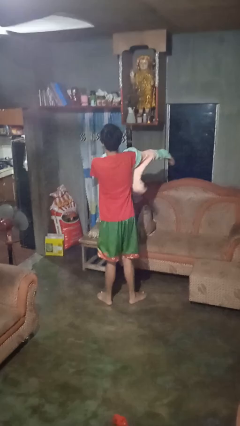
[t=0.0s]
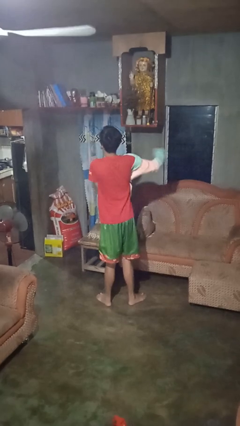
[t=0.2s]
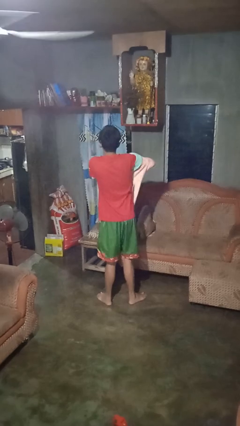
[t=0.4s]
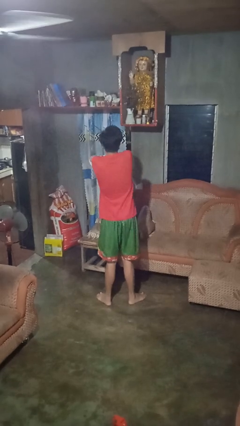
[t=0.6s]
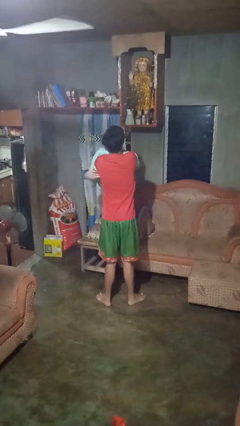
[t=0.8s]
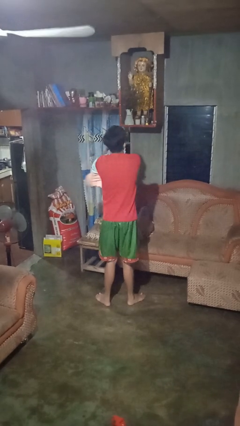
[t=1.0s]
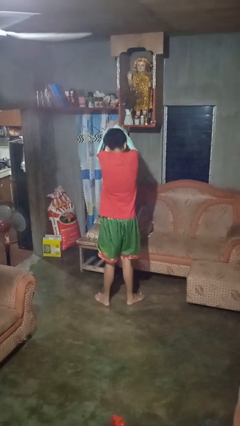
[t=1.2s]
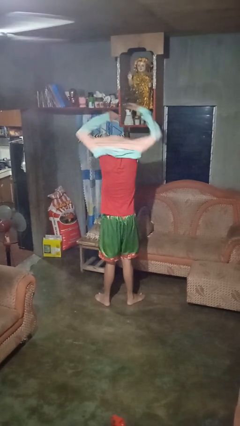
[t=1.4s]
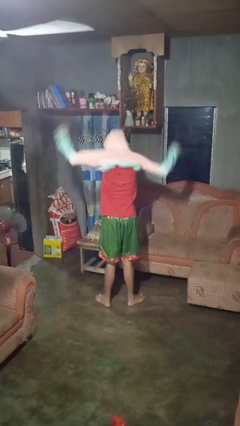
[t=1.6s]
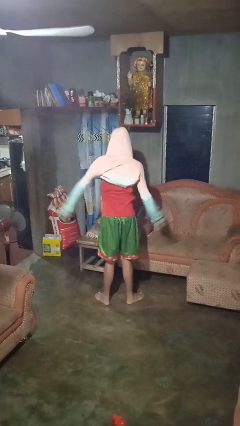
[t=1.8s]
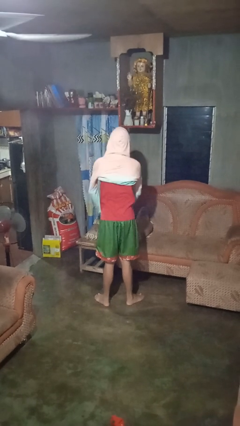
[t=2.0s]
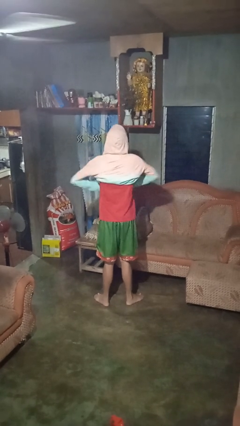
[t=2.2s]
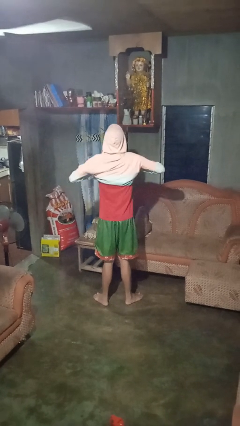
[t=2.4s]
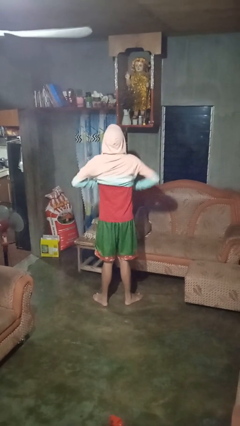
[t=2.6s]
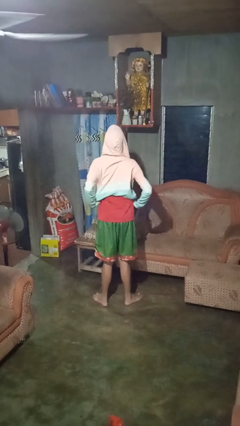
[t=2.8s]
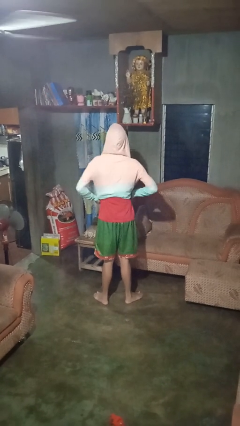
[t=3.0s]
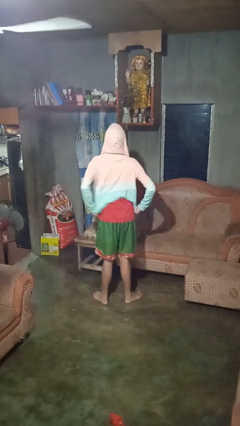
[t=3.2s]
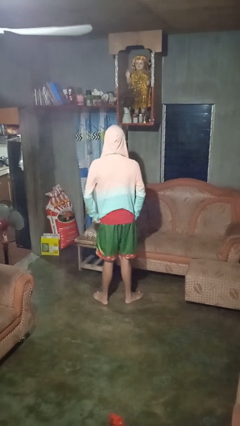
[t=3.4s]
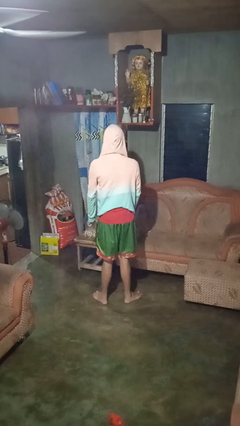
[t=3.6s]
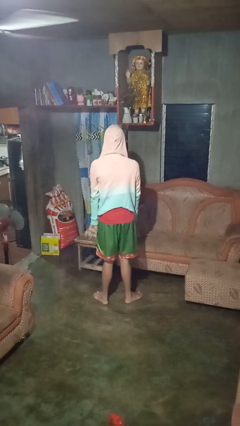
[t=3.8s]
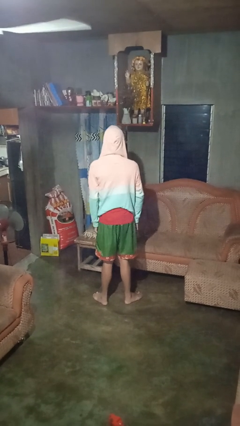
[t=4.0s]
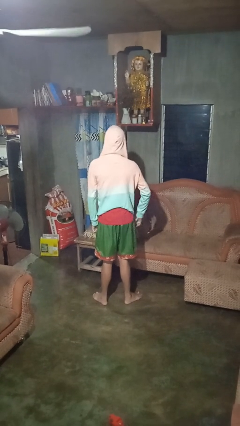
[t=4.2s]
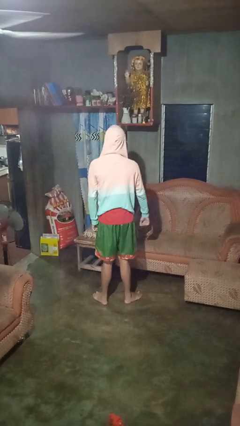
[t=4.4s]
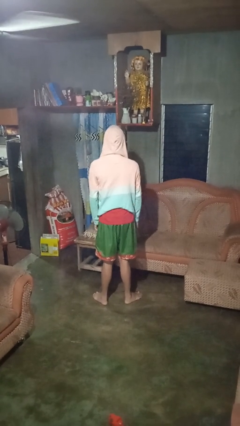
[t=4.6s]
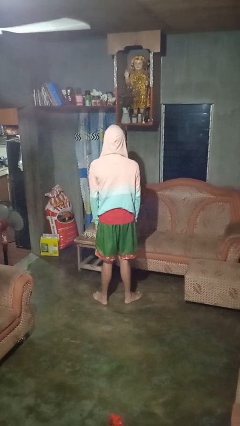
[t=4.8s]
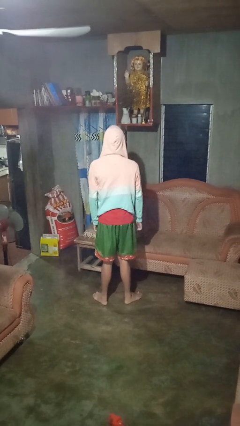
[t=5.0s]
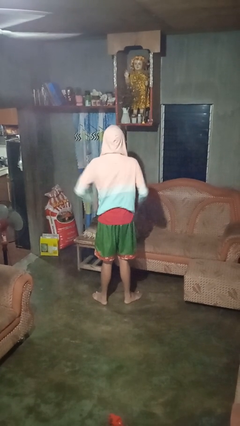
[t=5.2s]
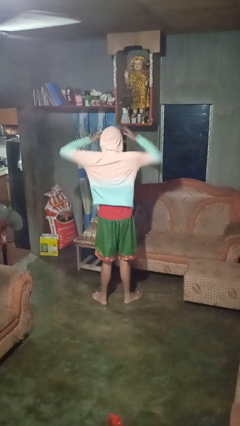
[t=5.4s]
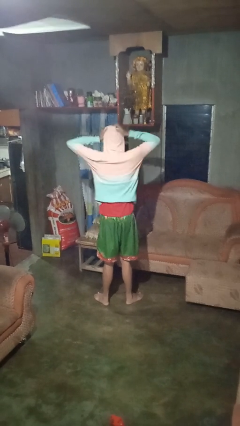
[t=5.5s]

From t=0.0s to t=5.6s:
person puts on hoodie

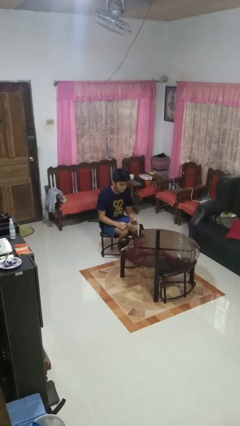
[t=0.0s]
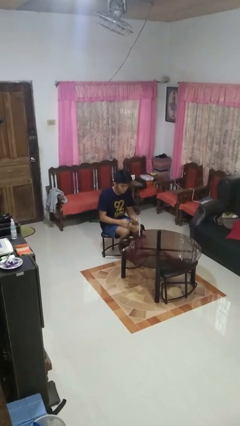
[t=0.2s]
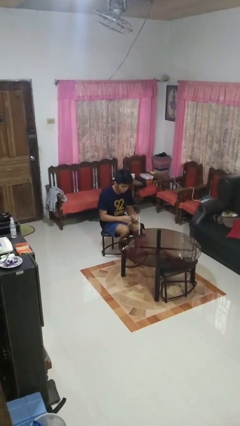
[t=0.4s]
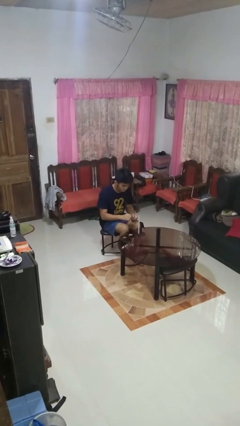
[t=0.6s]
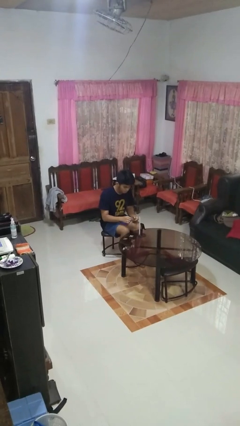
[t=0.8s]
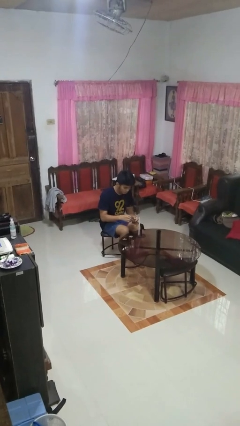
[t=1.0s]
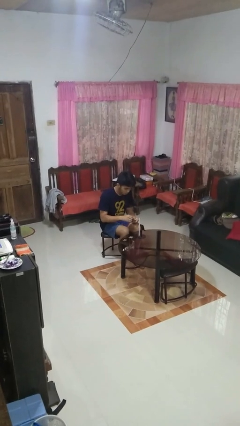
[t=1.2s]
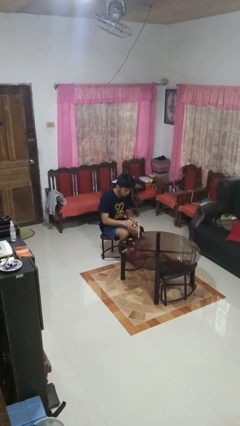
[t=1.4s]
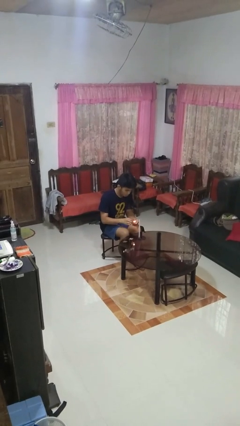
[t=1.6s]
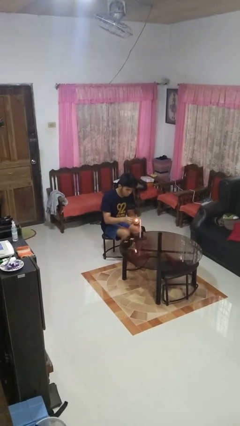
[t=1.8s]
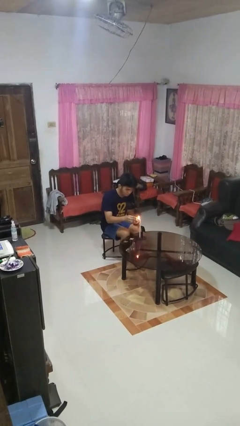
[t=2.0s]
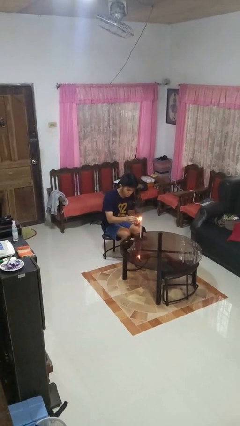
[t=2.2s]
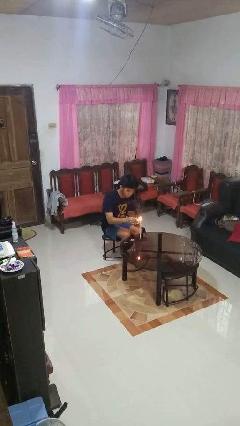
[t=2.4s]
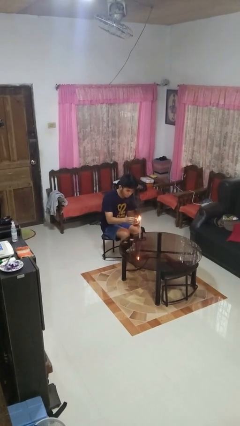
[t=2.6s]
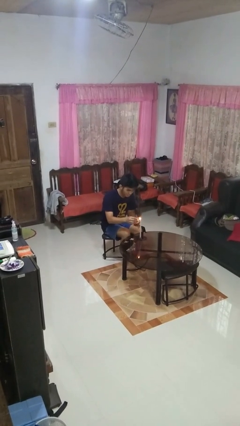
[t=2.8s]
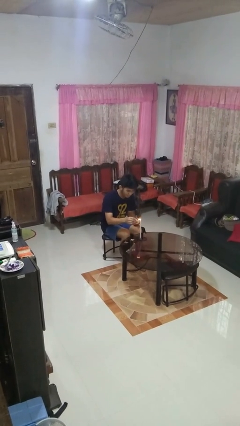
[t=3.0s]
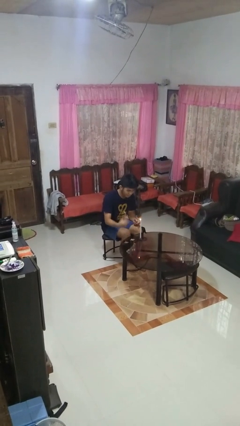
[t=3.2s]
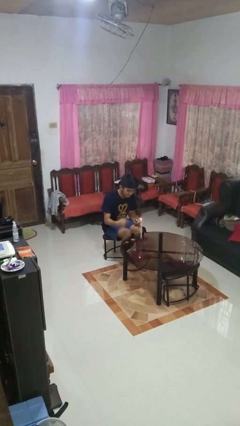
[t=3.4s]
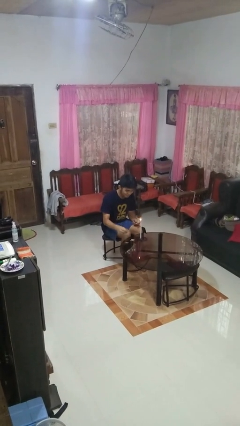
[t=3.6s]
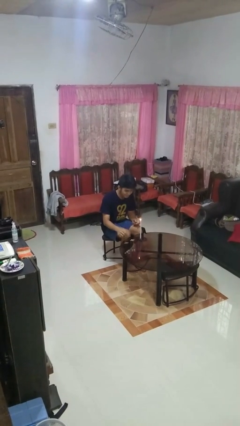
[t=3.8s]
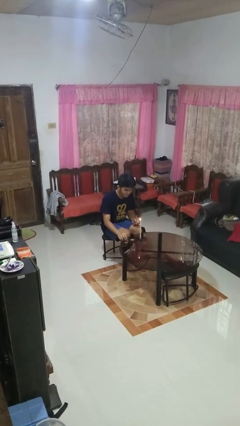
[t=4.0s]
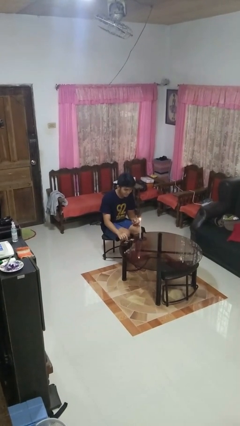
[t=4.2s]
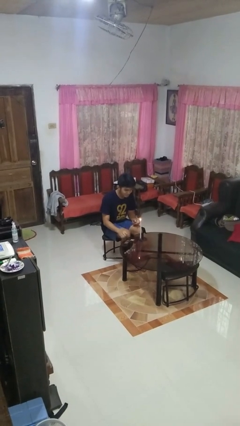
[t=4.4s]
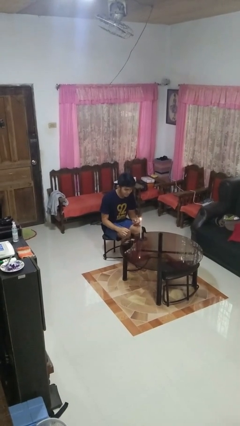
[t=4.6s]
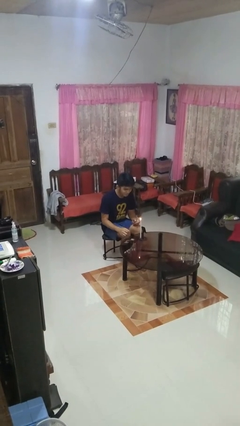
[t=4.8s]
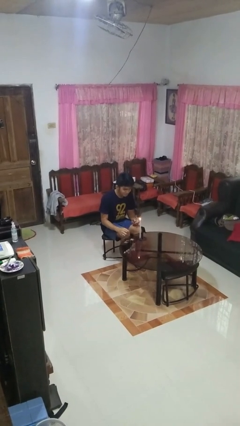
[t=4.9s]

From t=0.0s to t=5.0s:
person lights candle

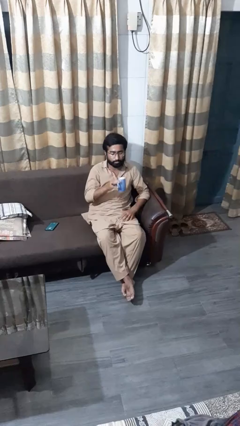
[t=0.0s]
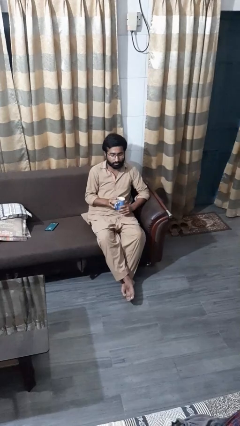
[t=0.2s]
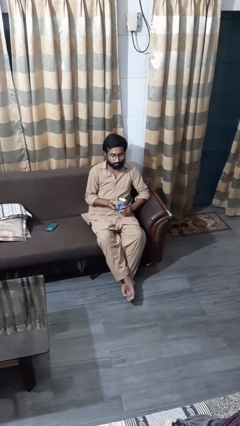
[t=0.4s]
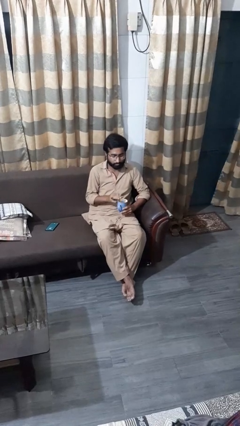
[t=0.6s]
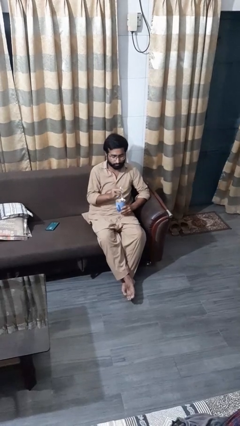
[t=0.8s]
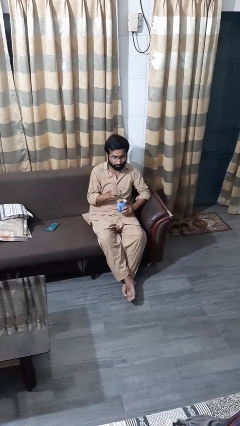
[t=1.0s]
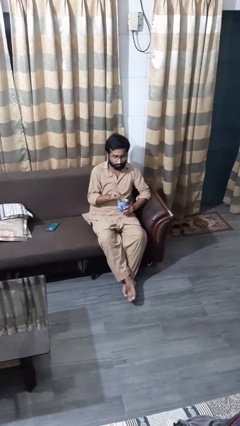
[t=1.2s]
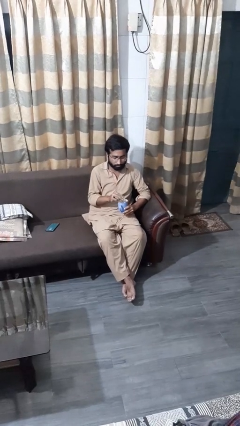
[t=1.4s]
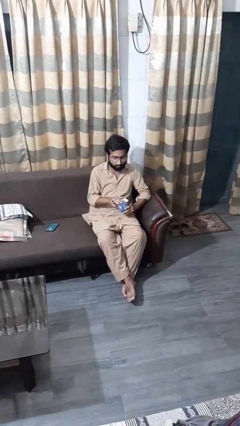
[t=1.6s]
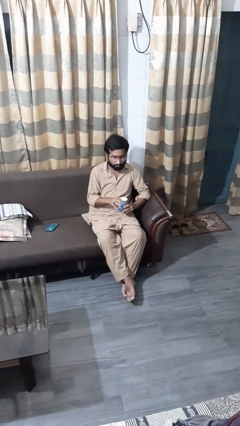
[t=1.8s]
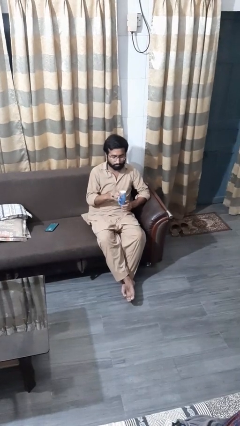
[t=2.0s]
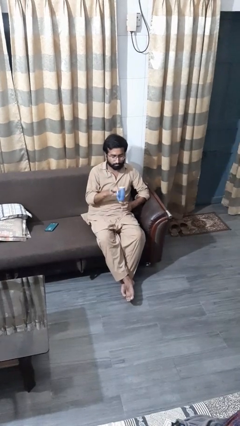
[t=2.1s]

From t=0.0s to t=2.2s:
person stirs mug

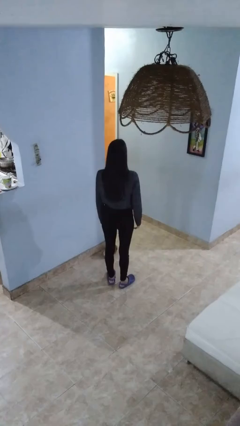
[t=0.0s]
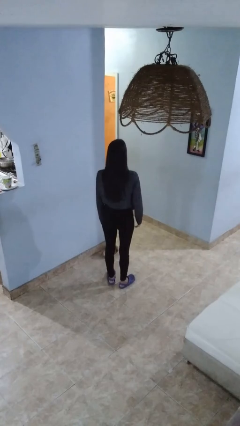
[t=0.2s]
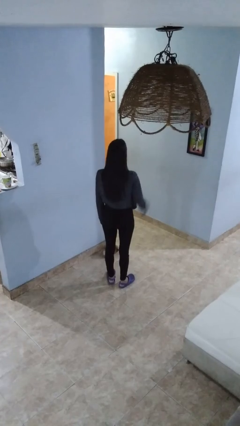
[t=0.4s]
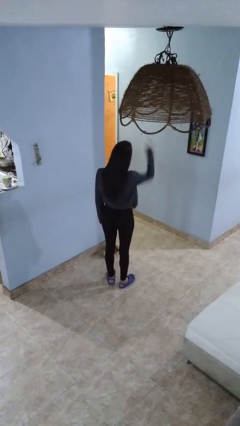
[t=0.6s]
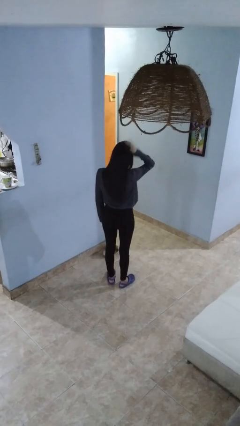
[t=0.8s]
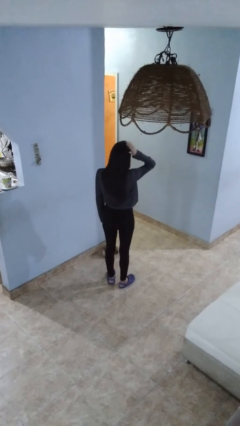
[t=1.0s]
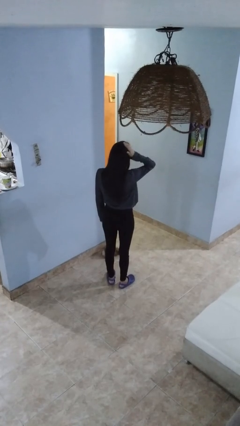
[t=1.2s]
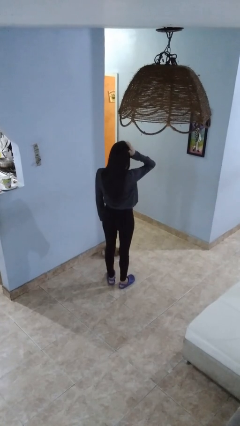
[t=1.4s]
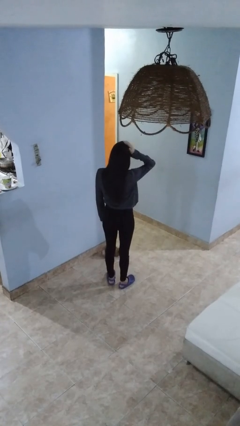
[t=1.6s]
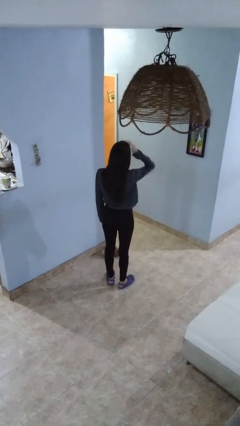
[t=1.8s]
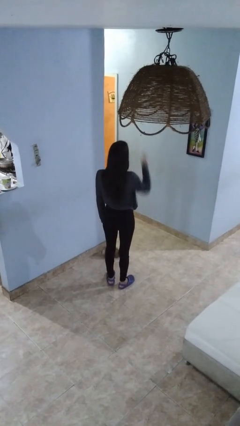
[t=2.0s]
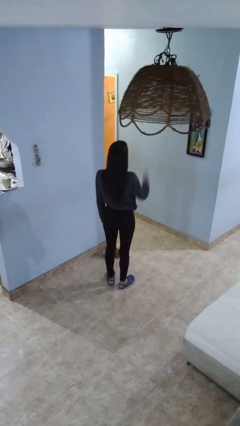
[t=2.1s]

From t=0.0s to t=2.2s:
person pats head

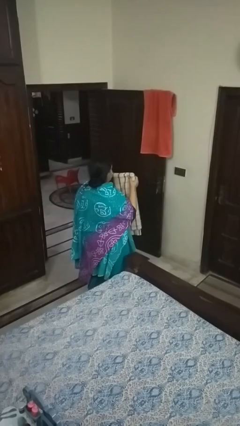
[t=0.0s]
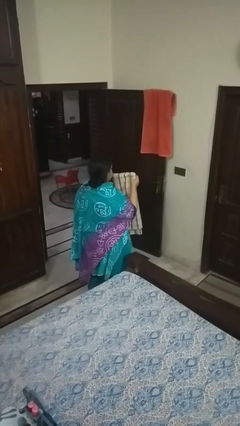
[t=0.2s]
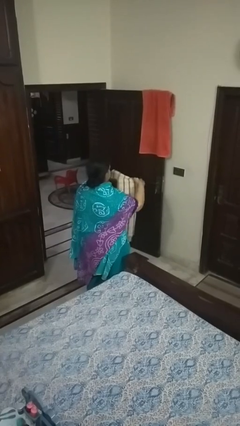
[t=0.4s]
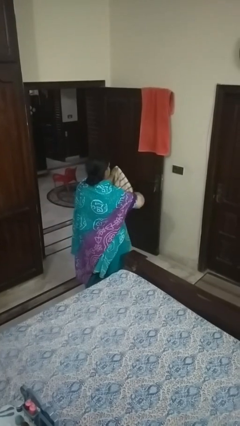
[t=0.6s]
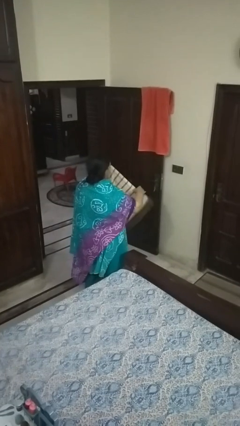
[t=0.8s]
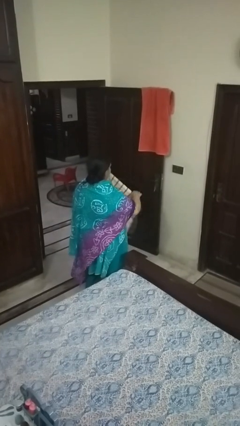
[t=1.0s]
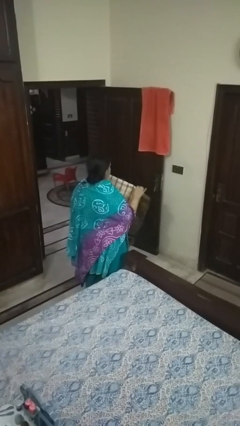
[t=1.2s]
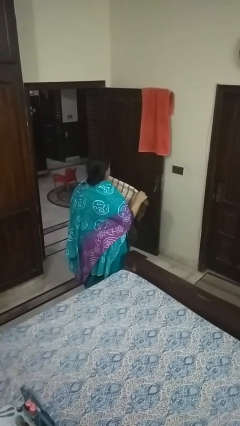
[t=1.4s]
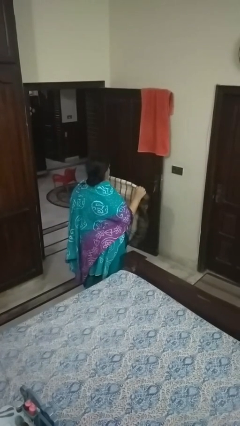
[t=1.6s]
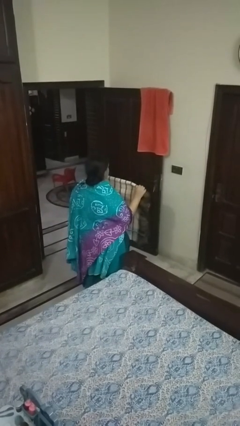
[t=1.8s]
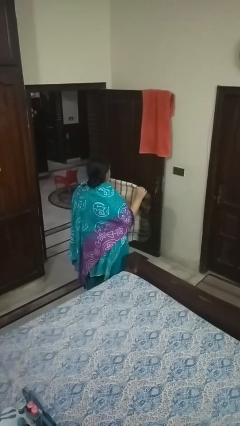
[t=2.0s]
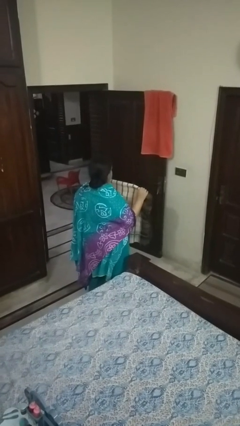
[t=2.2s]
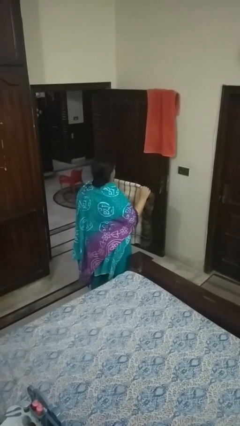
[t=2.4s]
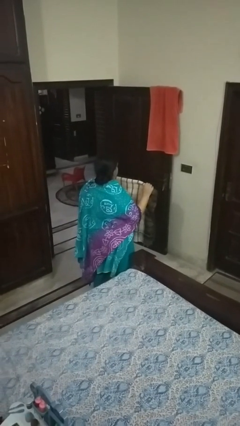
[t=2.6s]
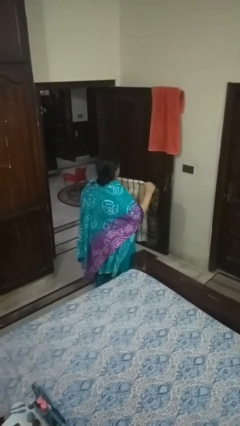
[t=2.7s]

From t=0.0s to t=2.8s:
person unfolds blanket
